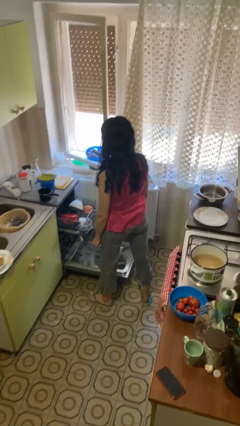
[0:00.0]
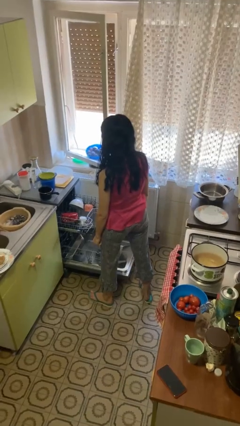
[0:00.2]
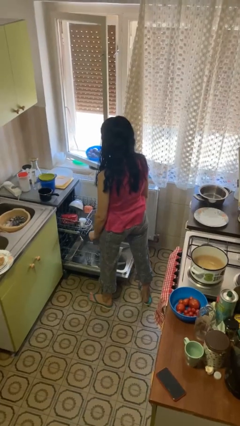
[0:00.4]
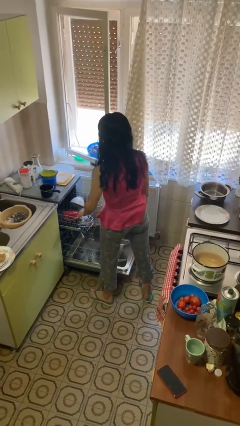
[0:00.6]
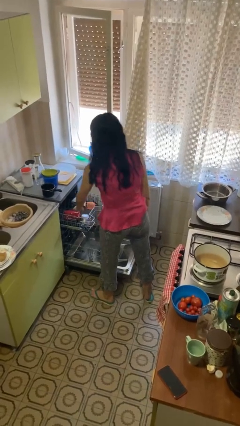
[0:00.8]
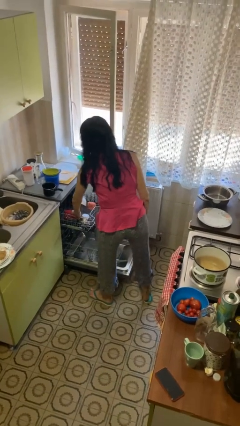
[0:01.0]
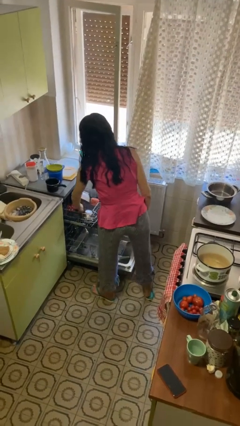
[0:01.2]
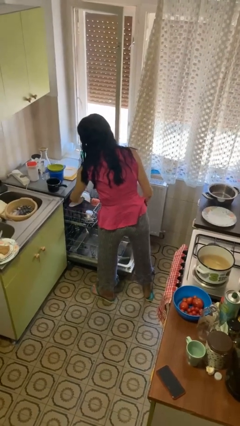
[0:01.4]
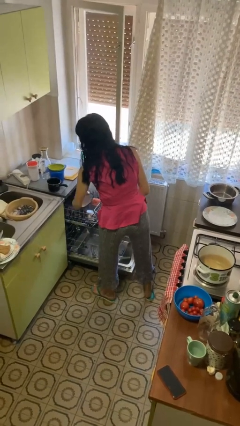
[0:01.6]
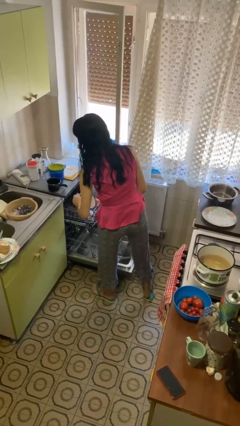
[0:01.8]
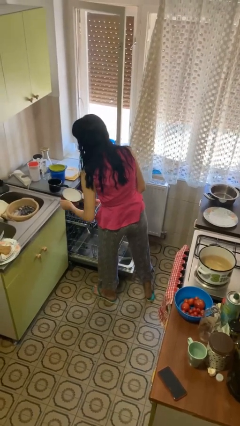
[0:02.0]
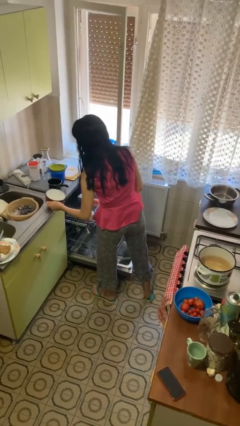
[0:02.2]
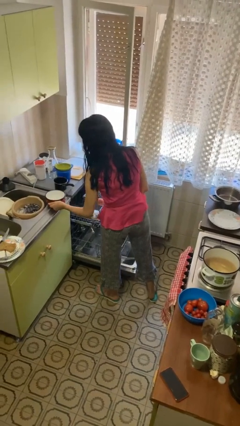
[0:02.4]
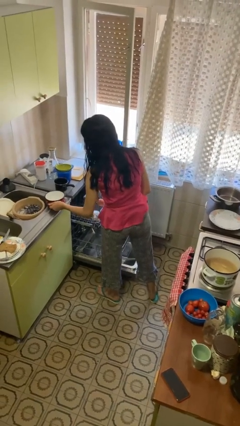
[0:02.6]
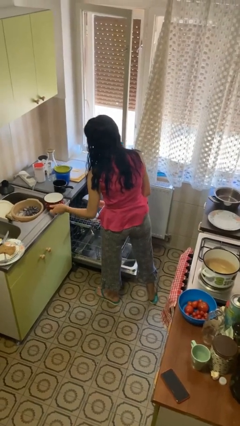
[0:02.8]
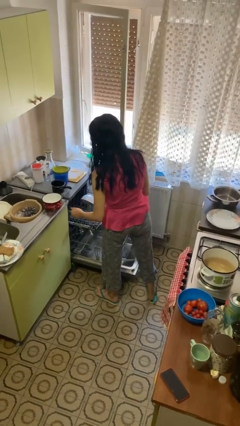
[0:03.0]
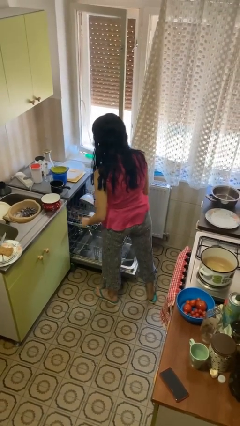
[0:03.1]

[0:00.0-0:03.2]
person unloads dishwasher

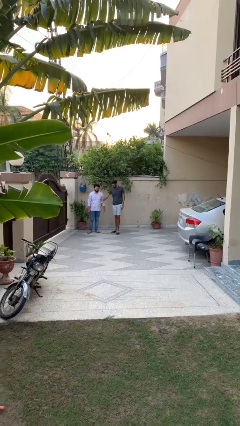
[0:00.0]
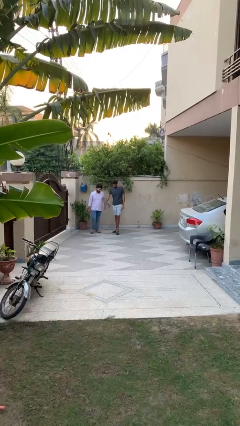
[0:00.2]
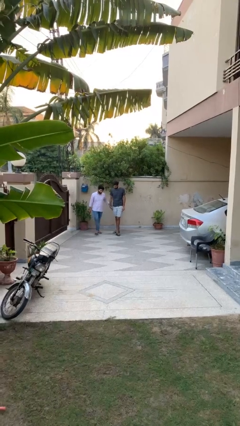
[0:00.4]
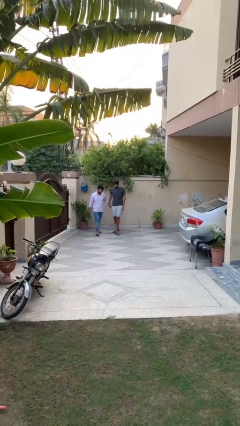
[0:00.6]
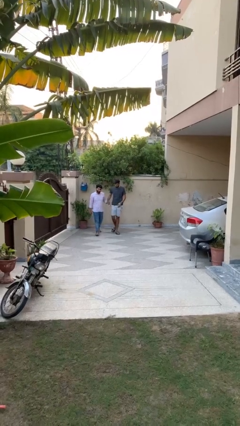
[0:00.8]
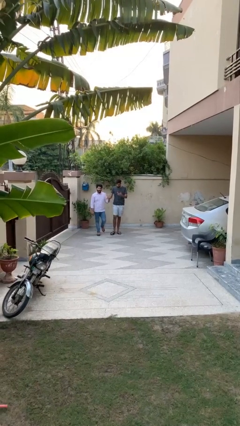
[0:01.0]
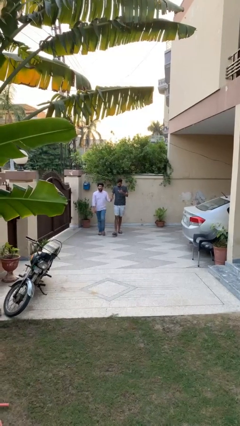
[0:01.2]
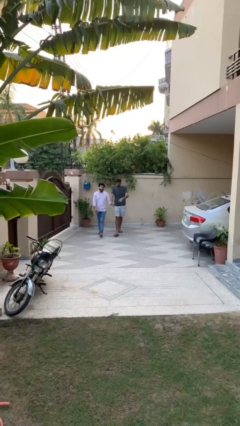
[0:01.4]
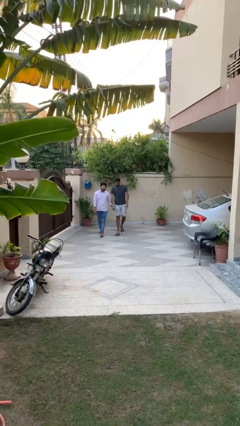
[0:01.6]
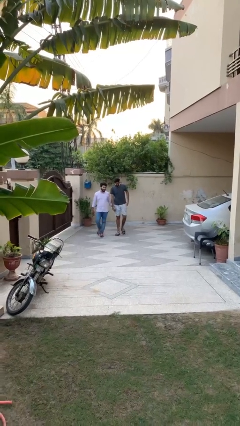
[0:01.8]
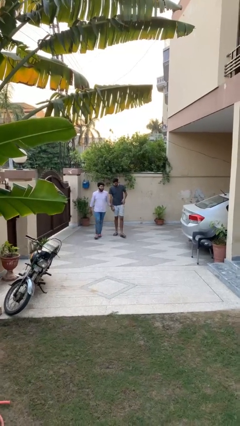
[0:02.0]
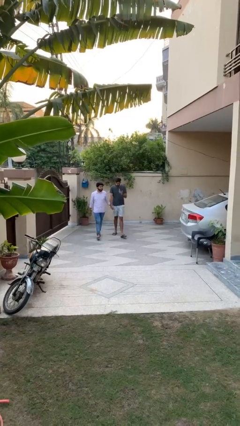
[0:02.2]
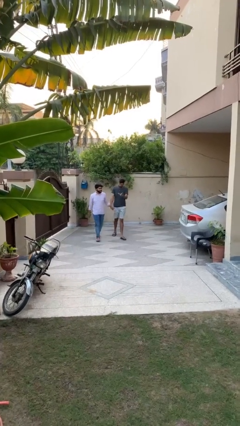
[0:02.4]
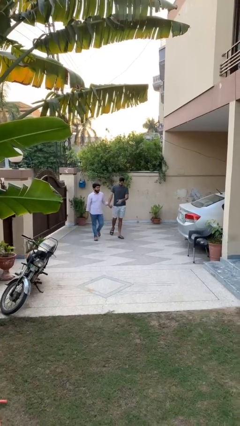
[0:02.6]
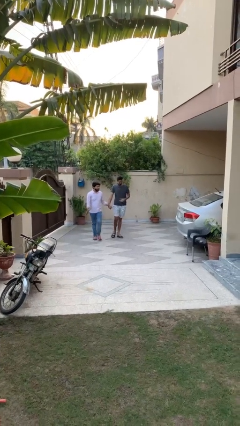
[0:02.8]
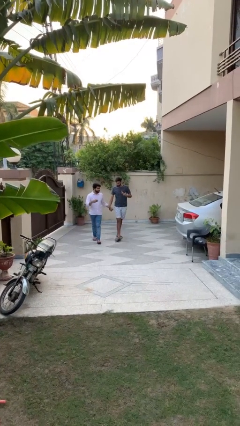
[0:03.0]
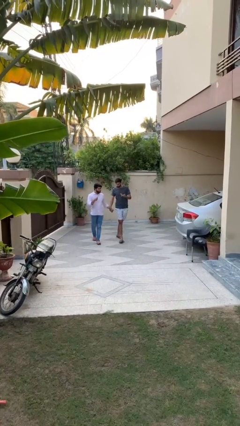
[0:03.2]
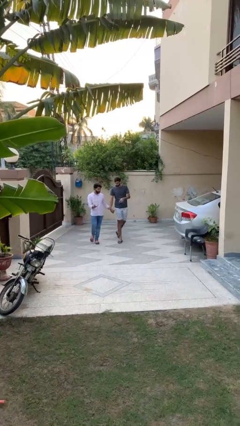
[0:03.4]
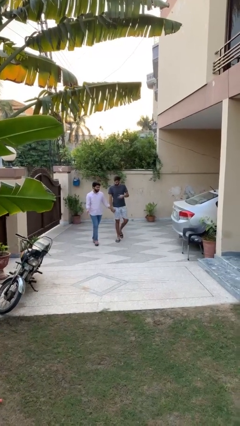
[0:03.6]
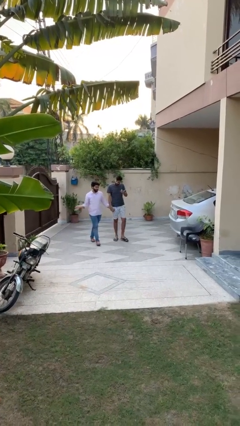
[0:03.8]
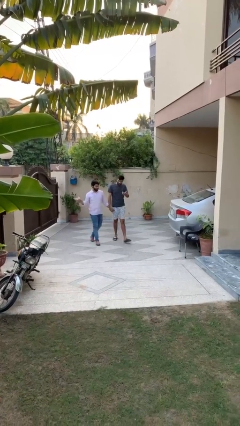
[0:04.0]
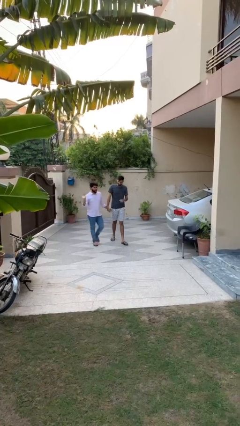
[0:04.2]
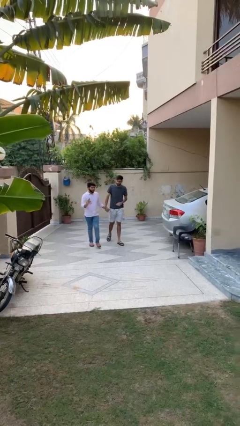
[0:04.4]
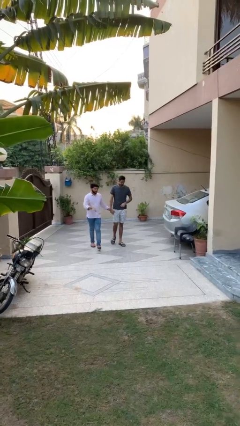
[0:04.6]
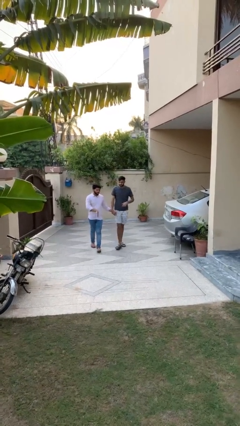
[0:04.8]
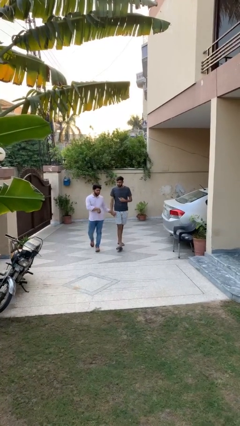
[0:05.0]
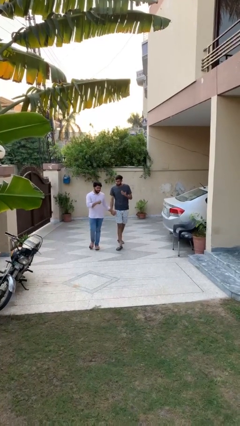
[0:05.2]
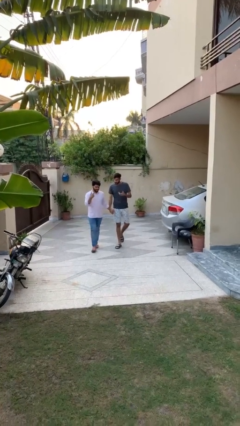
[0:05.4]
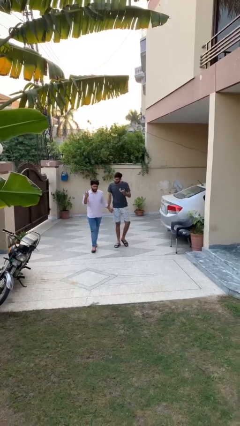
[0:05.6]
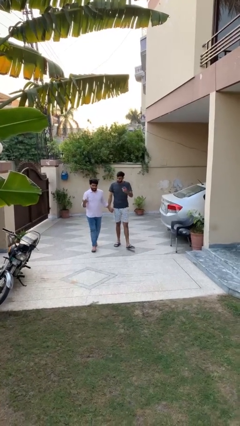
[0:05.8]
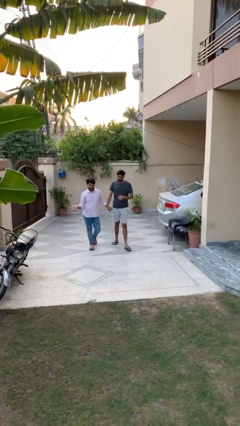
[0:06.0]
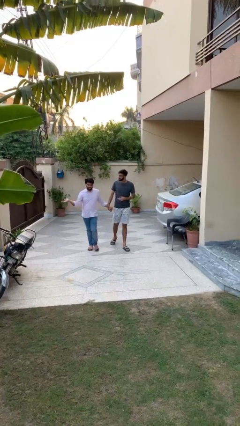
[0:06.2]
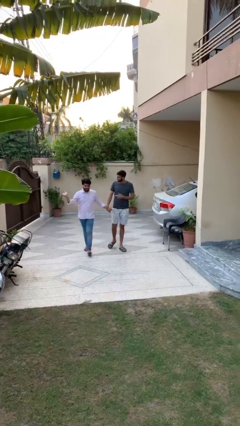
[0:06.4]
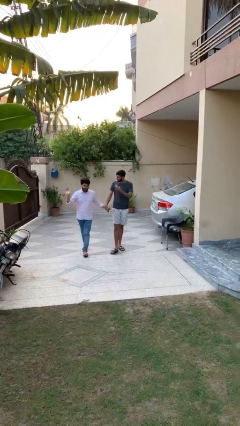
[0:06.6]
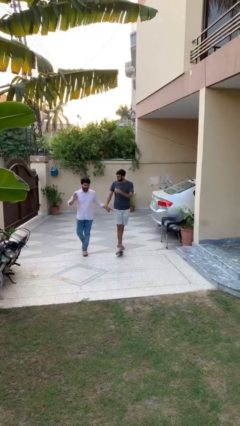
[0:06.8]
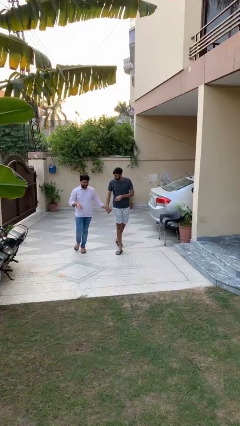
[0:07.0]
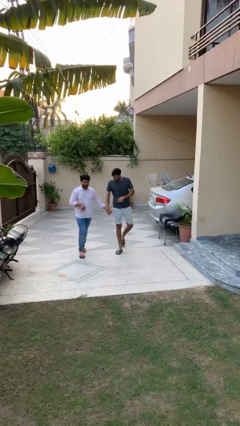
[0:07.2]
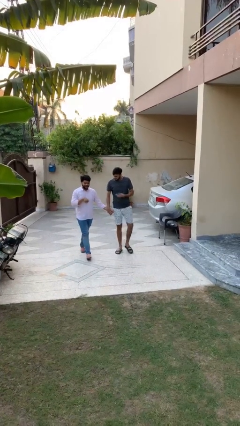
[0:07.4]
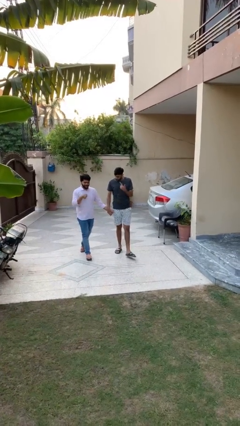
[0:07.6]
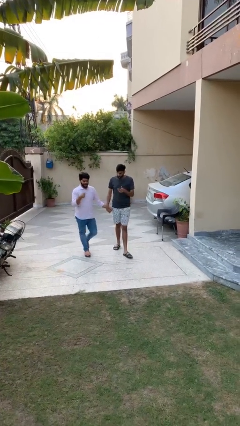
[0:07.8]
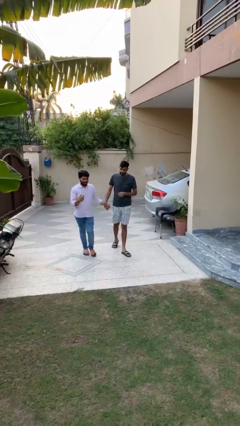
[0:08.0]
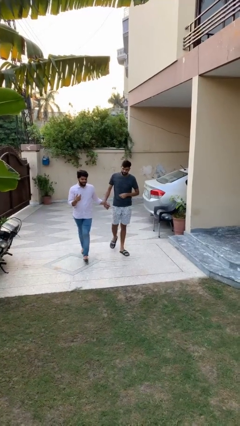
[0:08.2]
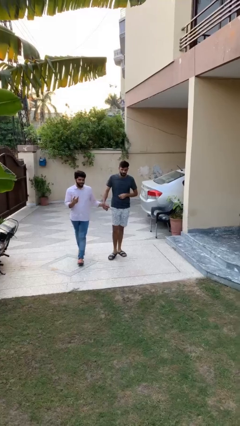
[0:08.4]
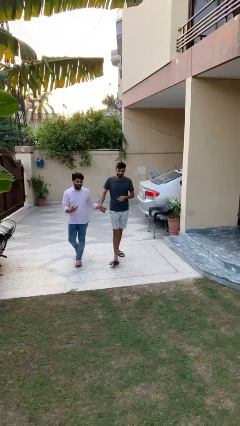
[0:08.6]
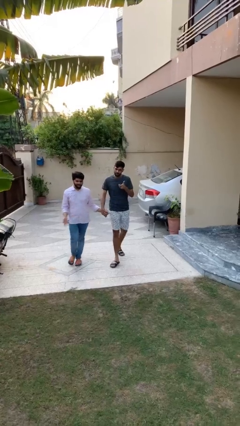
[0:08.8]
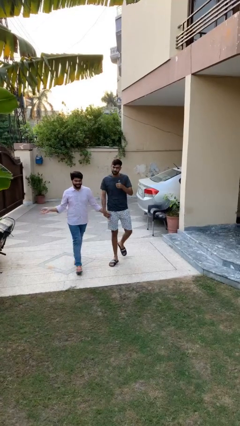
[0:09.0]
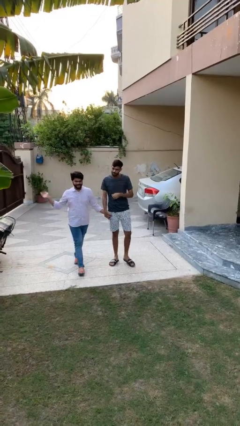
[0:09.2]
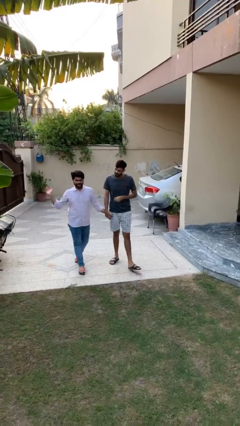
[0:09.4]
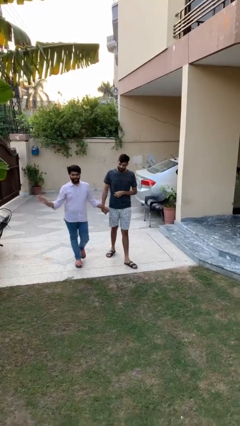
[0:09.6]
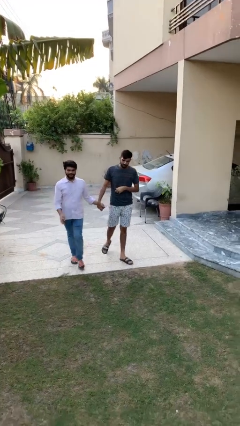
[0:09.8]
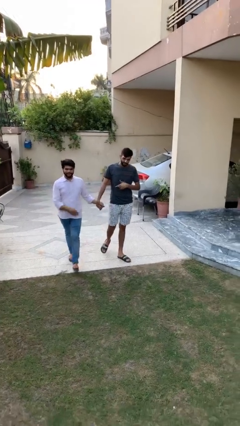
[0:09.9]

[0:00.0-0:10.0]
person holds hand

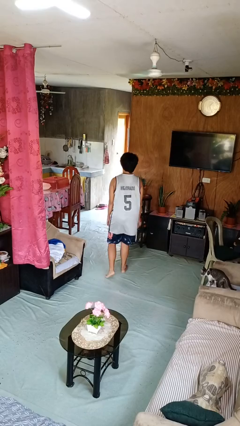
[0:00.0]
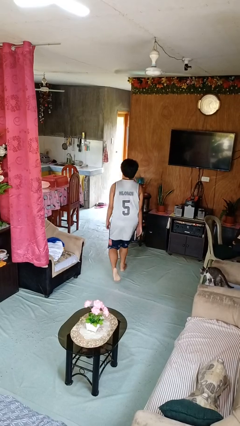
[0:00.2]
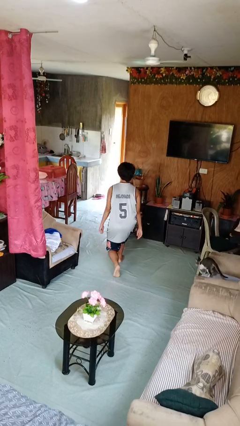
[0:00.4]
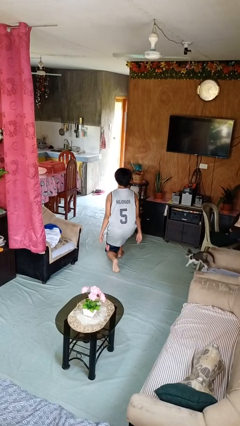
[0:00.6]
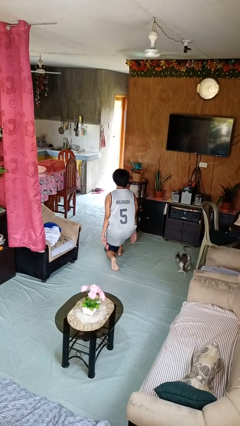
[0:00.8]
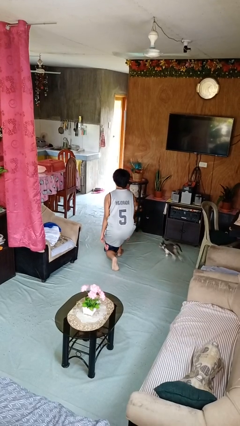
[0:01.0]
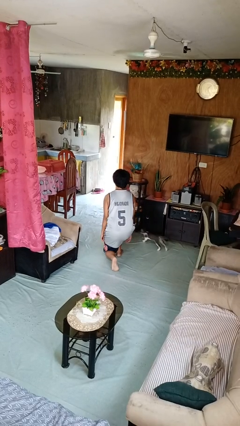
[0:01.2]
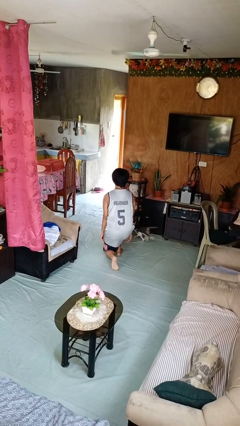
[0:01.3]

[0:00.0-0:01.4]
person kneels

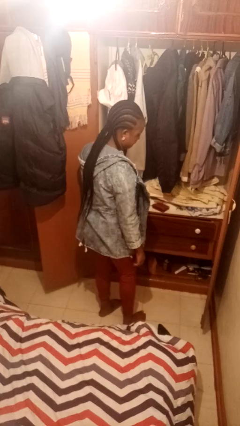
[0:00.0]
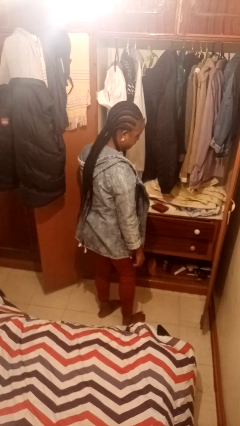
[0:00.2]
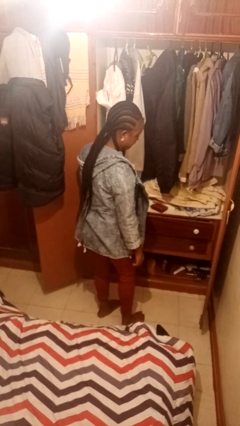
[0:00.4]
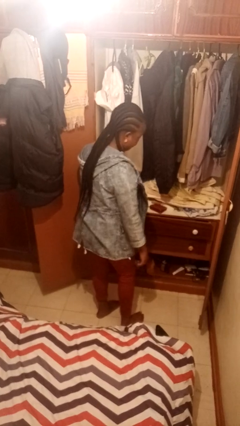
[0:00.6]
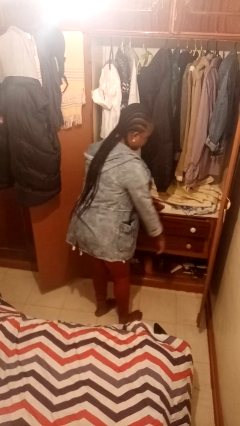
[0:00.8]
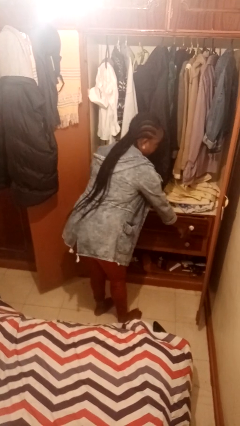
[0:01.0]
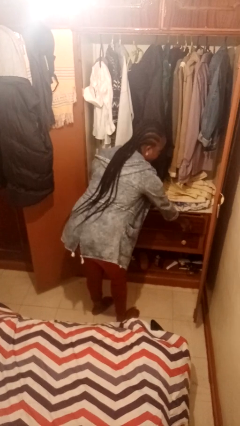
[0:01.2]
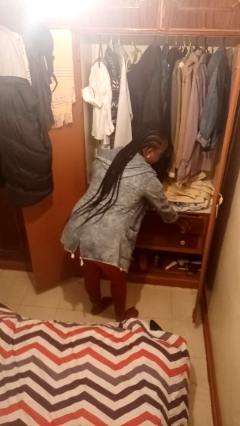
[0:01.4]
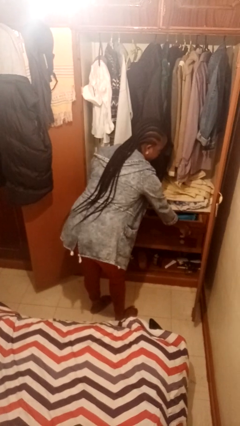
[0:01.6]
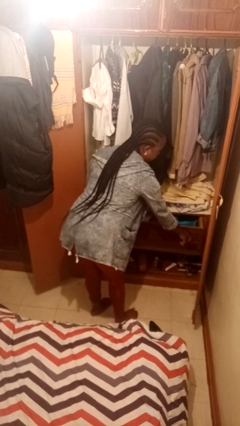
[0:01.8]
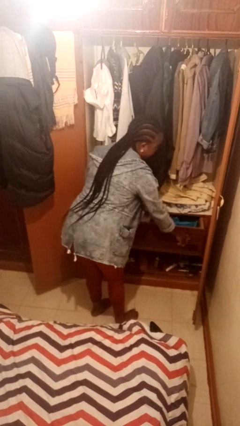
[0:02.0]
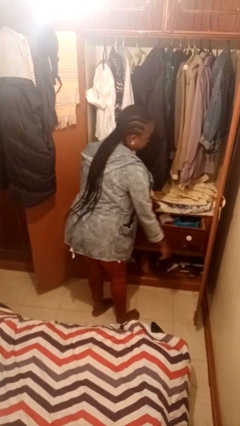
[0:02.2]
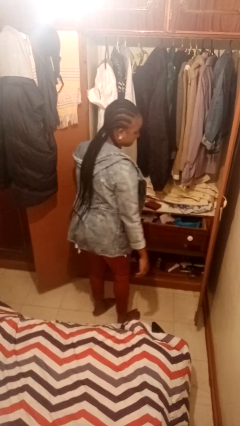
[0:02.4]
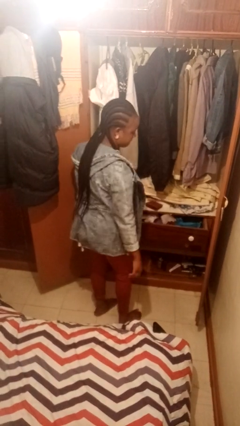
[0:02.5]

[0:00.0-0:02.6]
person opens dresser drawer

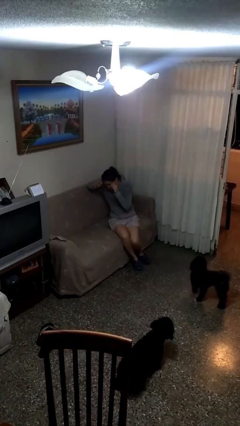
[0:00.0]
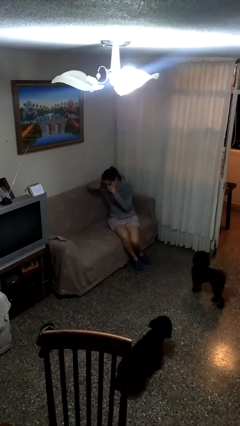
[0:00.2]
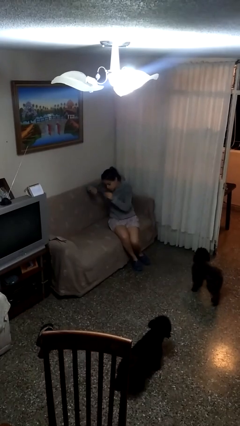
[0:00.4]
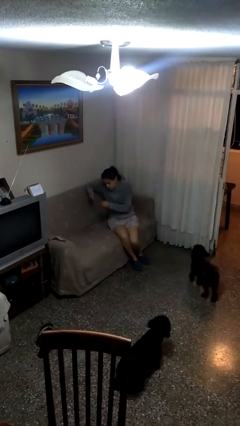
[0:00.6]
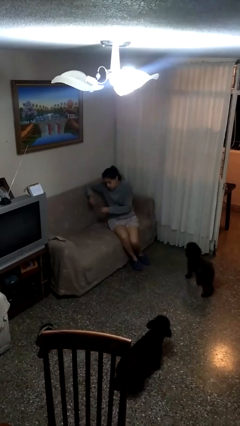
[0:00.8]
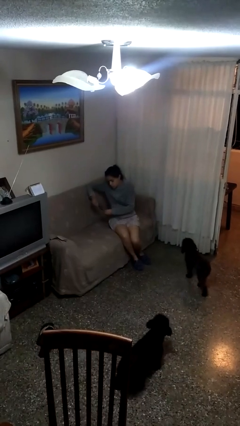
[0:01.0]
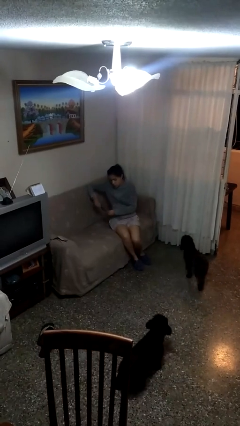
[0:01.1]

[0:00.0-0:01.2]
person takes off glasses
